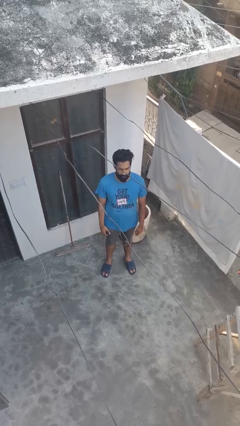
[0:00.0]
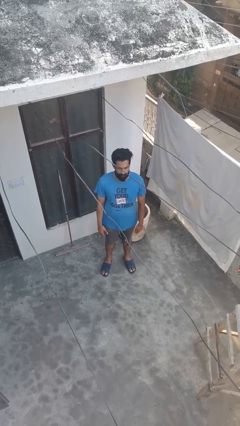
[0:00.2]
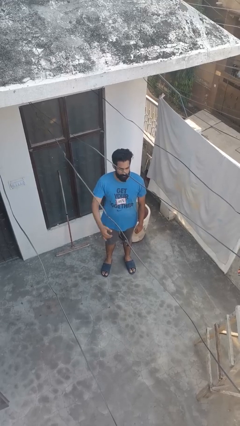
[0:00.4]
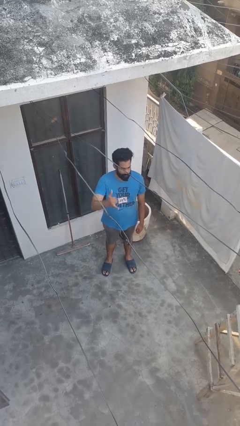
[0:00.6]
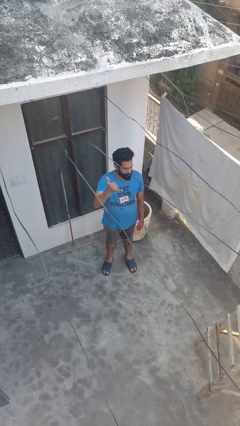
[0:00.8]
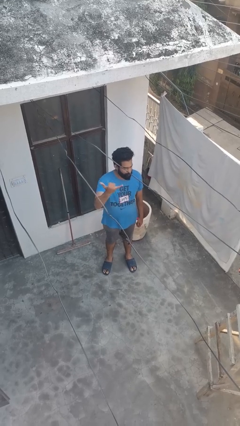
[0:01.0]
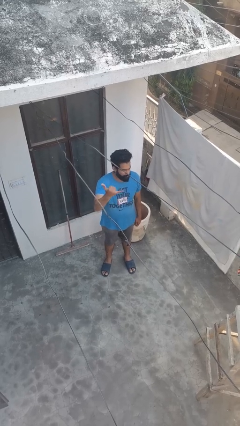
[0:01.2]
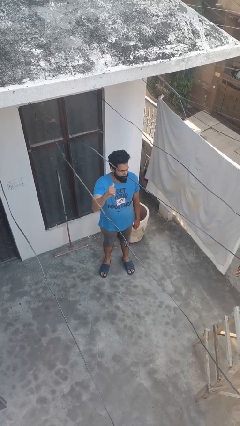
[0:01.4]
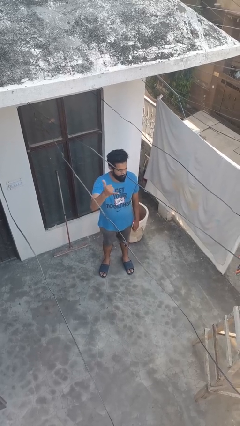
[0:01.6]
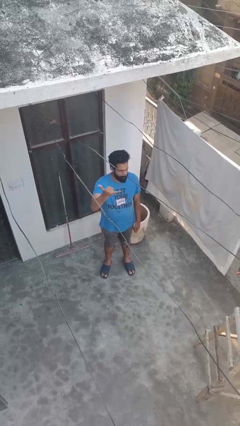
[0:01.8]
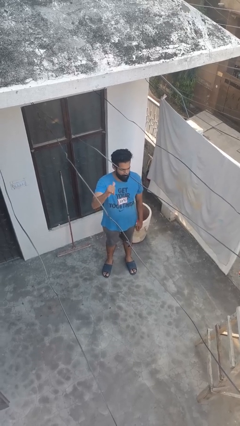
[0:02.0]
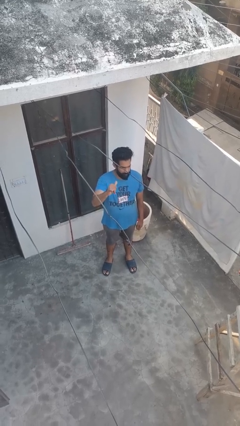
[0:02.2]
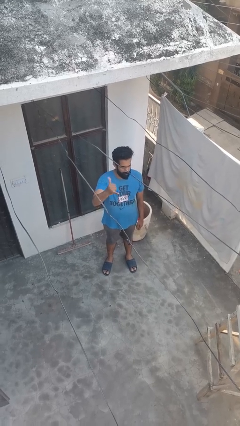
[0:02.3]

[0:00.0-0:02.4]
person gestures hang loose

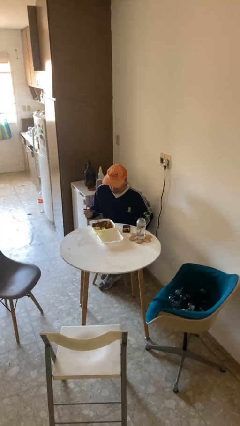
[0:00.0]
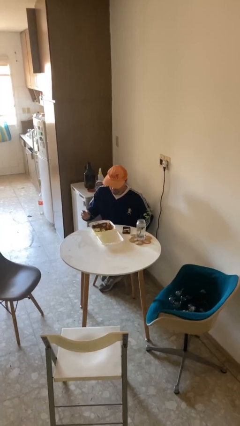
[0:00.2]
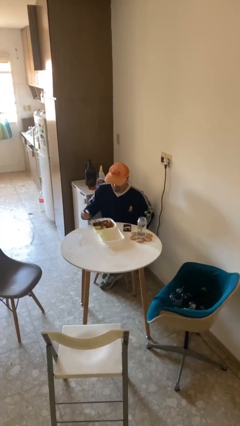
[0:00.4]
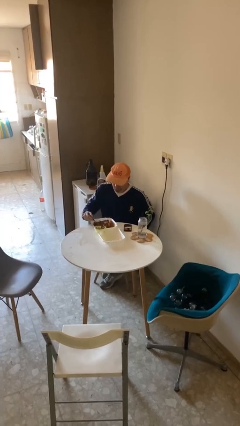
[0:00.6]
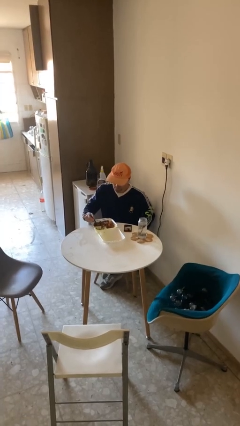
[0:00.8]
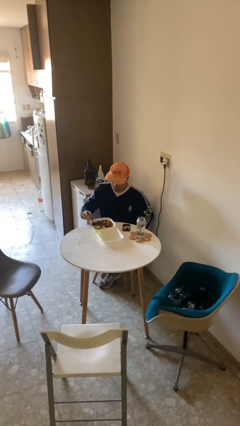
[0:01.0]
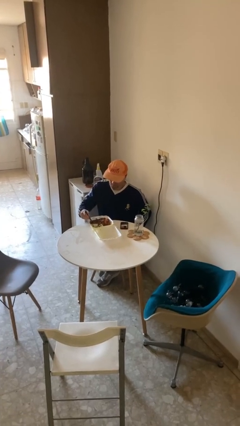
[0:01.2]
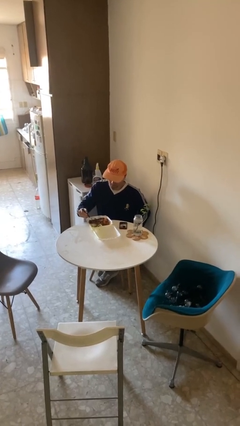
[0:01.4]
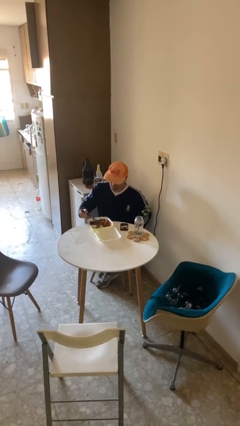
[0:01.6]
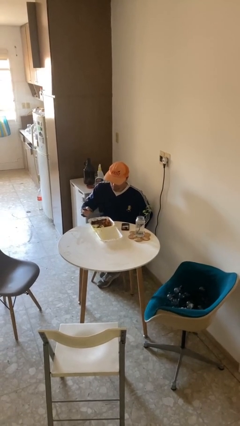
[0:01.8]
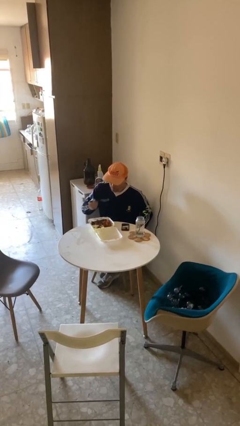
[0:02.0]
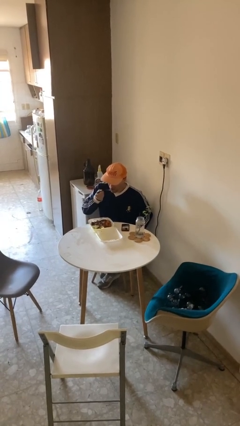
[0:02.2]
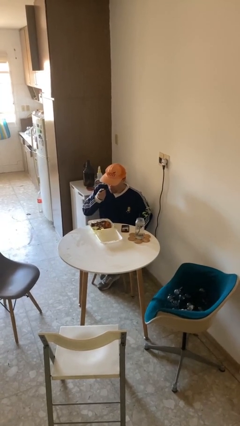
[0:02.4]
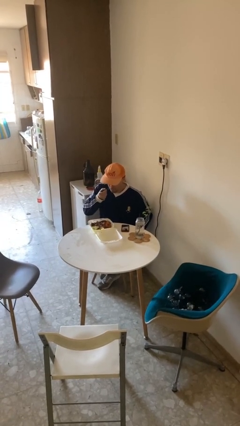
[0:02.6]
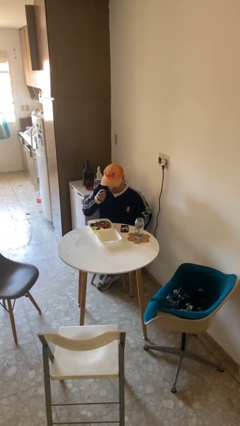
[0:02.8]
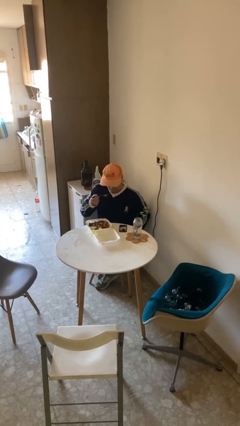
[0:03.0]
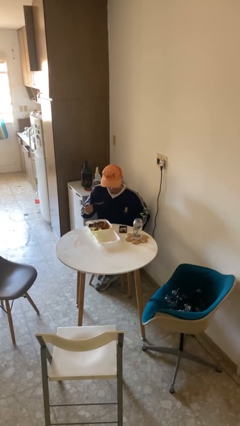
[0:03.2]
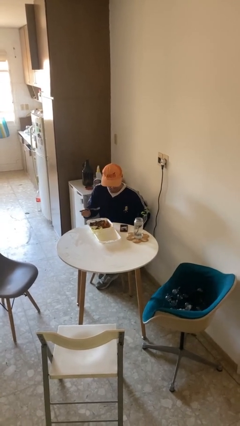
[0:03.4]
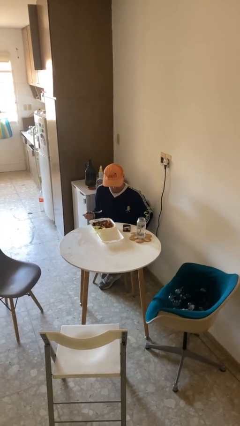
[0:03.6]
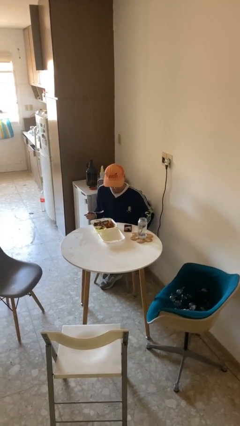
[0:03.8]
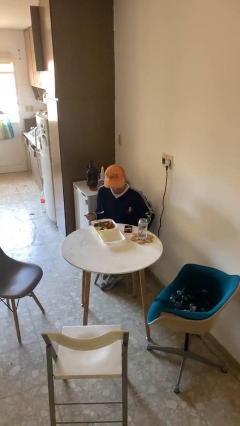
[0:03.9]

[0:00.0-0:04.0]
person eats with utensil

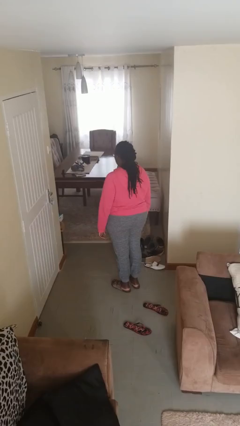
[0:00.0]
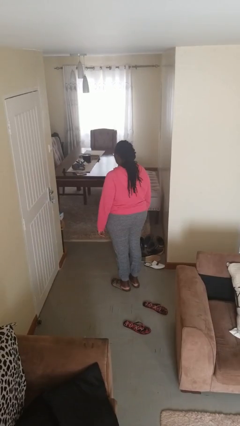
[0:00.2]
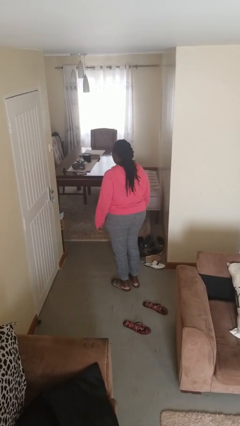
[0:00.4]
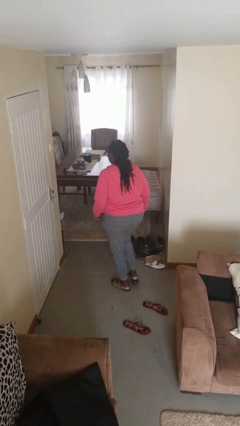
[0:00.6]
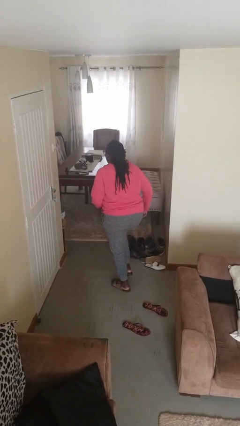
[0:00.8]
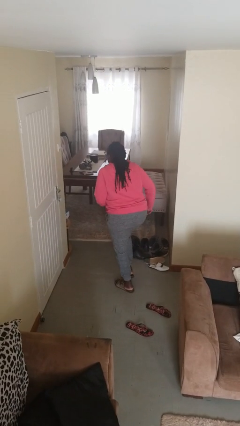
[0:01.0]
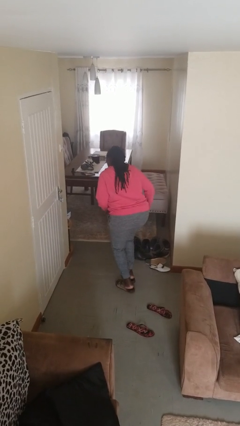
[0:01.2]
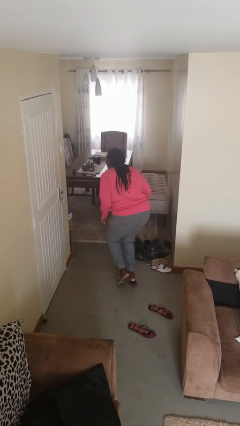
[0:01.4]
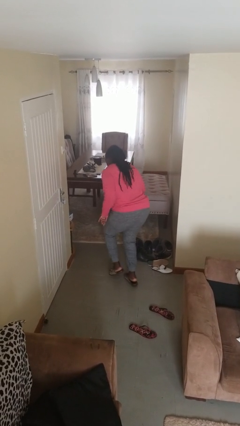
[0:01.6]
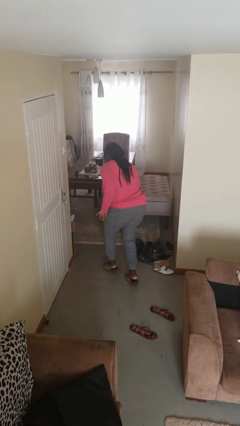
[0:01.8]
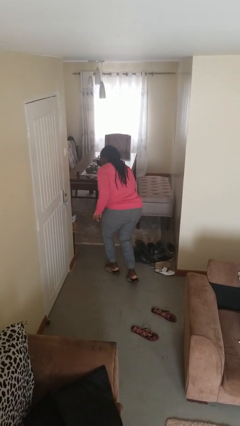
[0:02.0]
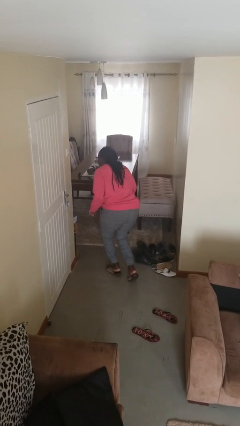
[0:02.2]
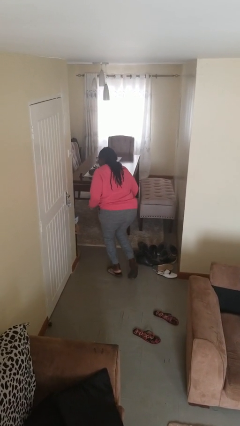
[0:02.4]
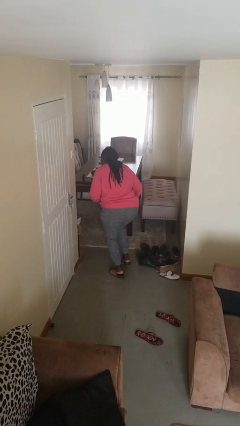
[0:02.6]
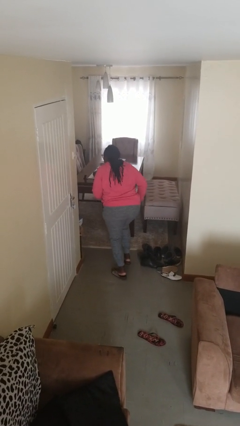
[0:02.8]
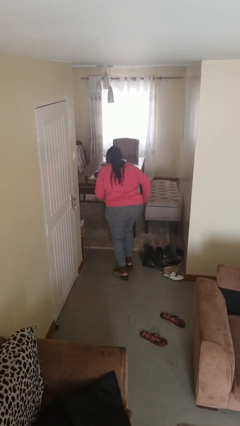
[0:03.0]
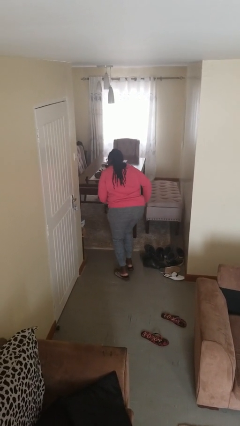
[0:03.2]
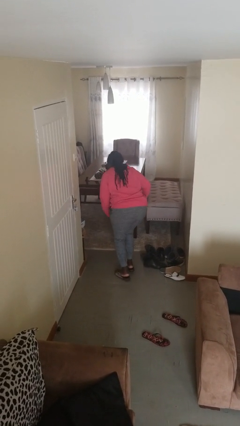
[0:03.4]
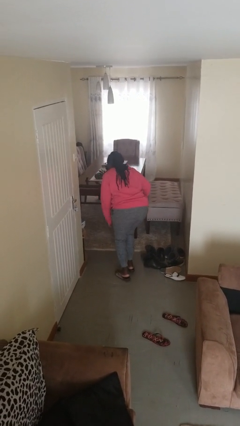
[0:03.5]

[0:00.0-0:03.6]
person walks tiptoe

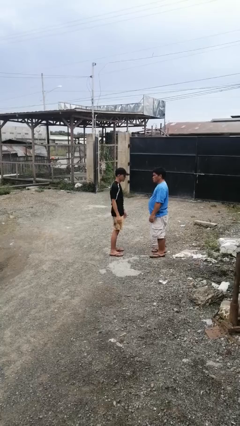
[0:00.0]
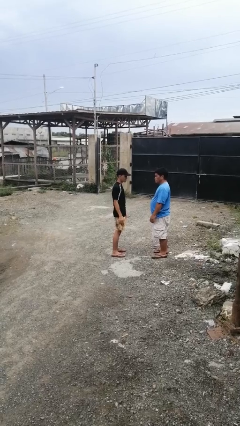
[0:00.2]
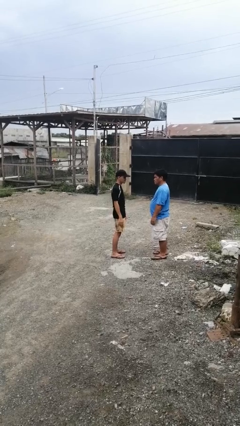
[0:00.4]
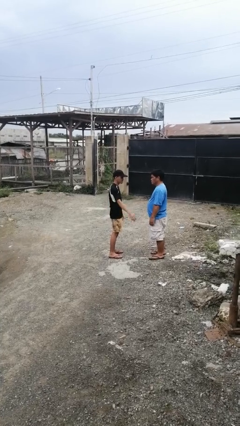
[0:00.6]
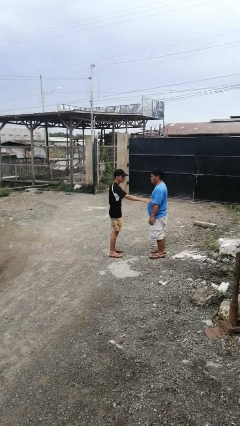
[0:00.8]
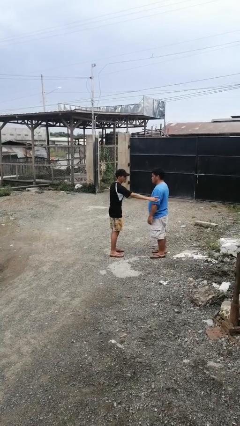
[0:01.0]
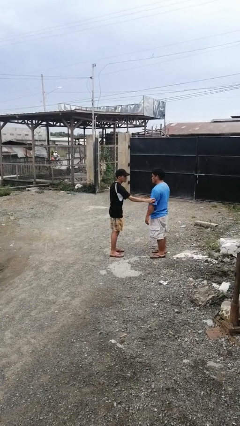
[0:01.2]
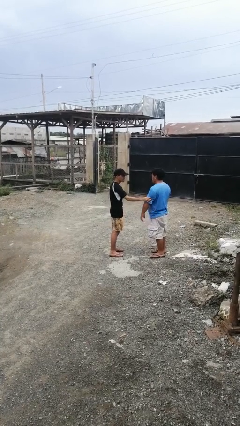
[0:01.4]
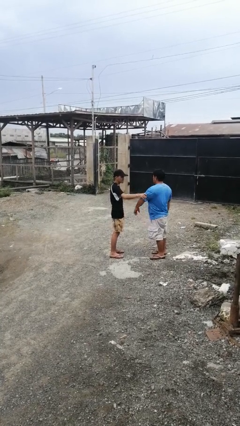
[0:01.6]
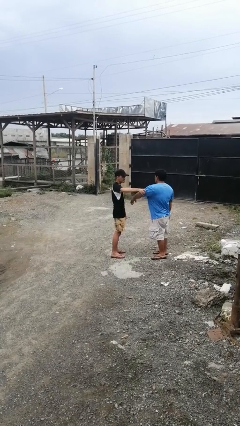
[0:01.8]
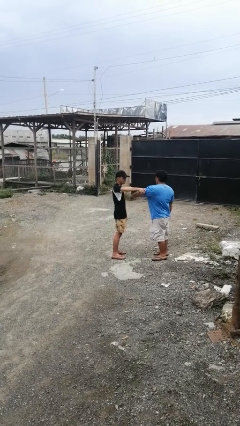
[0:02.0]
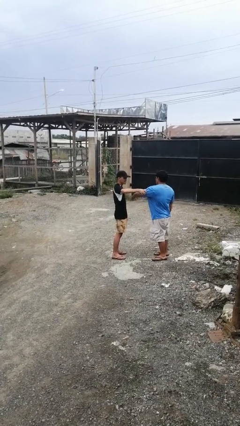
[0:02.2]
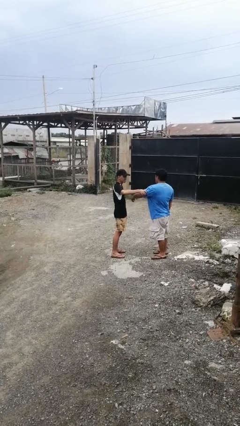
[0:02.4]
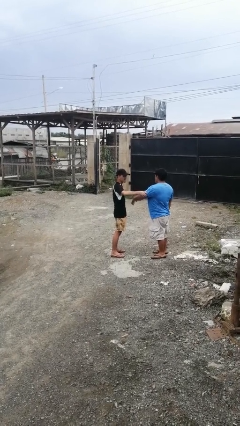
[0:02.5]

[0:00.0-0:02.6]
person grabs person by bicep

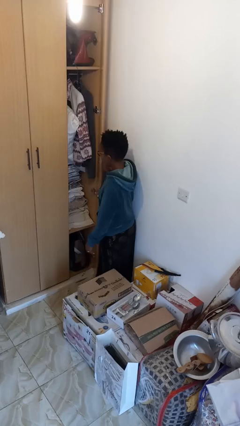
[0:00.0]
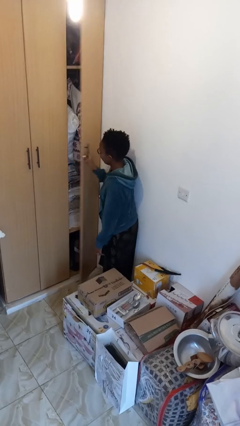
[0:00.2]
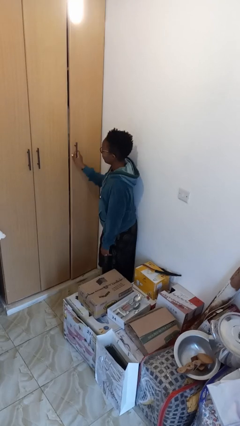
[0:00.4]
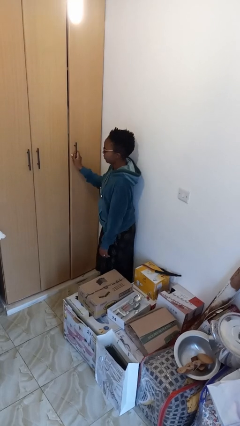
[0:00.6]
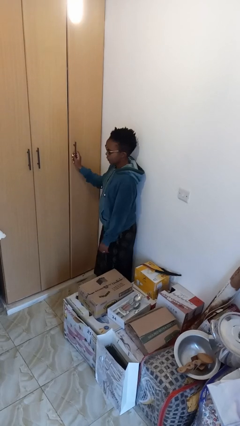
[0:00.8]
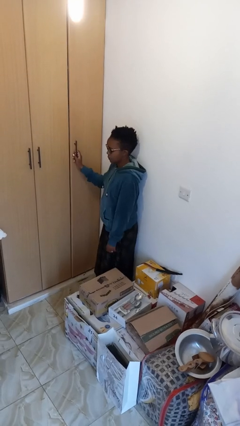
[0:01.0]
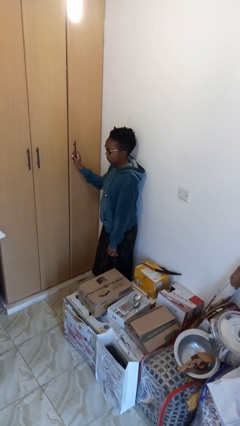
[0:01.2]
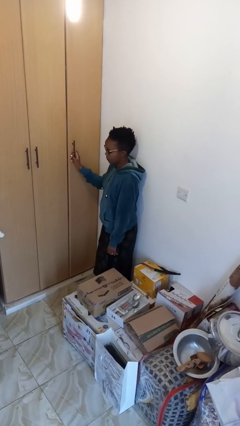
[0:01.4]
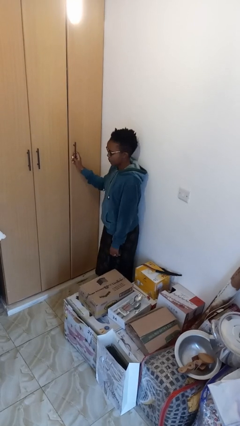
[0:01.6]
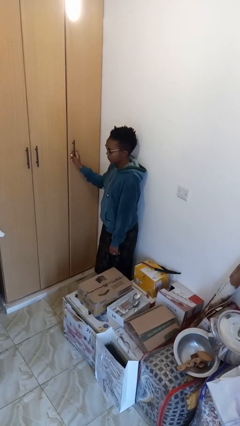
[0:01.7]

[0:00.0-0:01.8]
person opens closet door

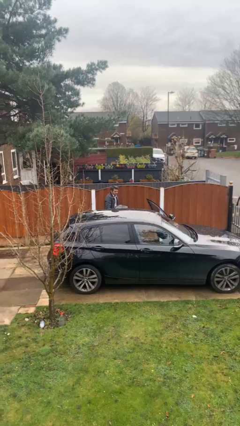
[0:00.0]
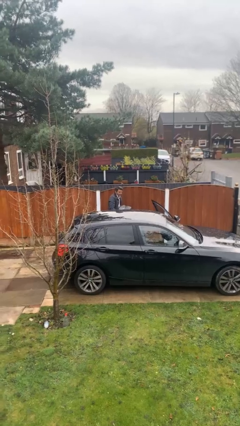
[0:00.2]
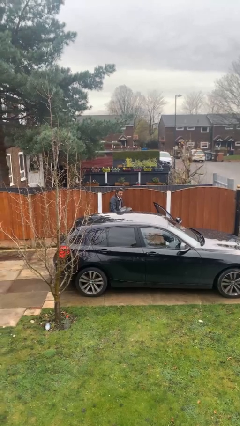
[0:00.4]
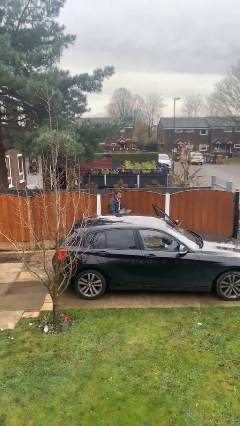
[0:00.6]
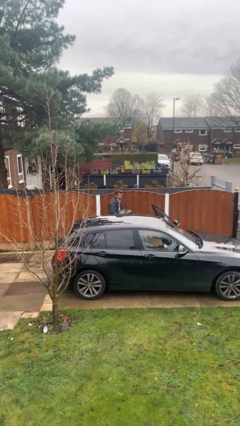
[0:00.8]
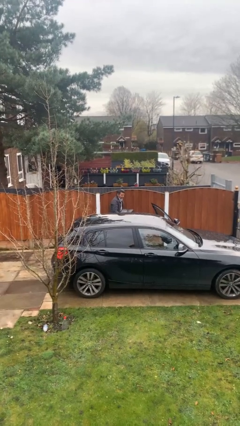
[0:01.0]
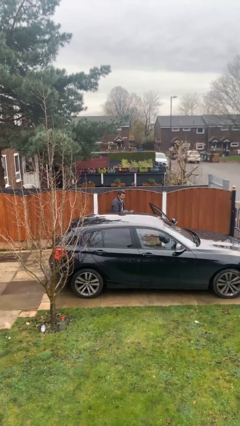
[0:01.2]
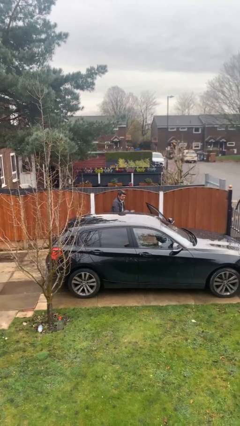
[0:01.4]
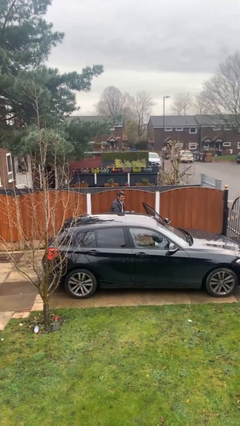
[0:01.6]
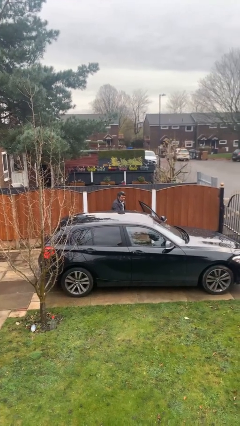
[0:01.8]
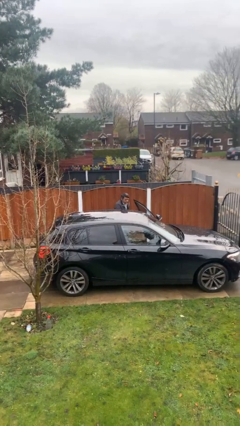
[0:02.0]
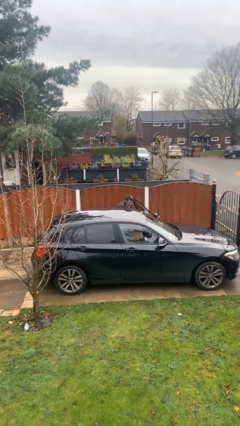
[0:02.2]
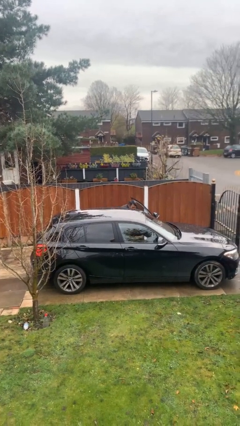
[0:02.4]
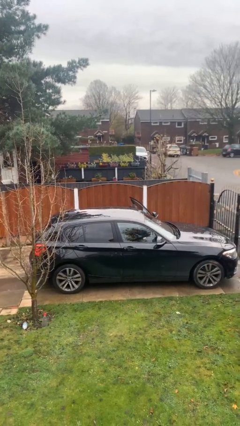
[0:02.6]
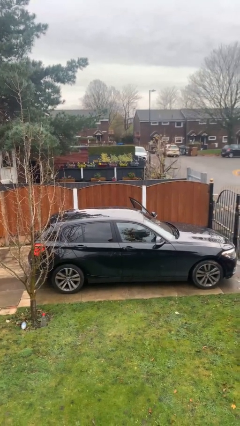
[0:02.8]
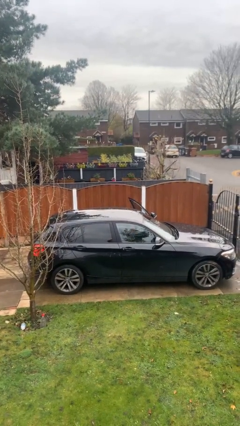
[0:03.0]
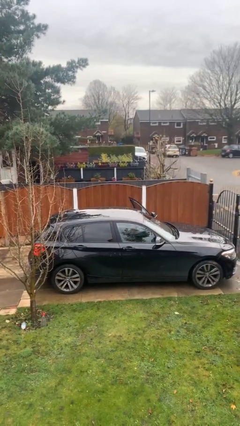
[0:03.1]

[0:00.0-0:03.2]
person loads car
